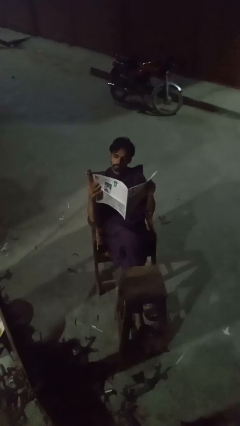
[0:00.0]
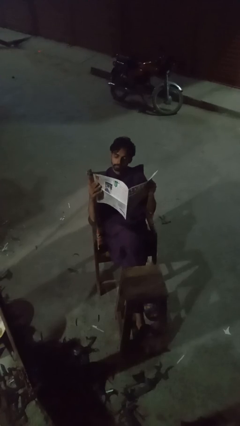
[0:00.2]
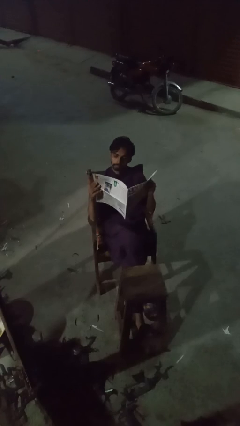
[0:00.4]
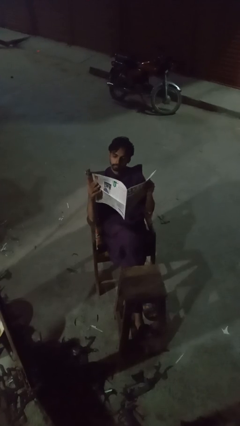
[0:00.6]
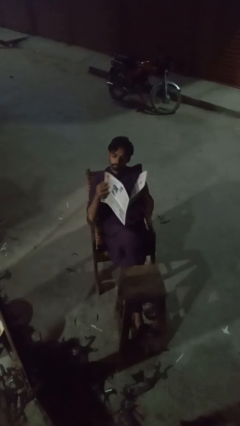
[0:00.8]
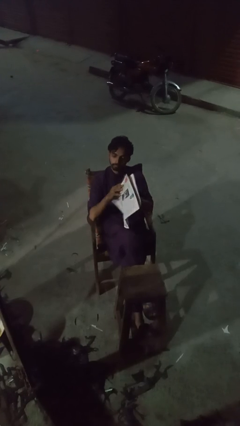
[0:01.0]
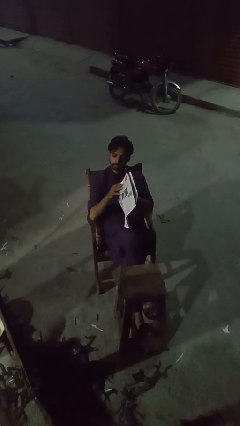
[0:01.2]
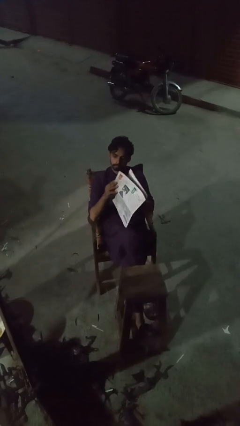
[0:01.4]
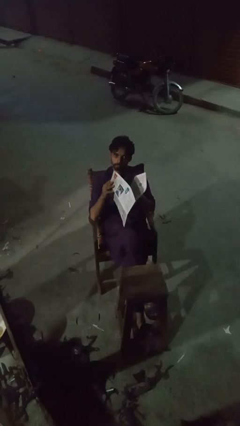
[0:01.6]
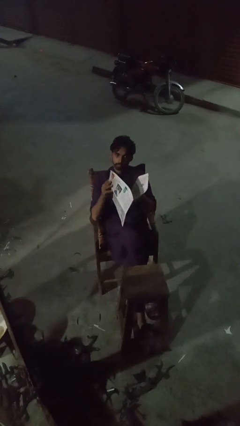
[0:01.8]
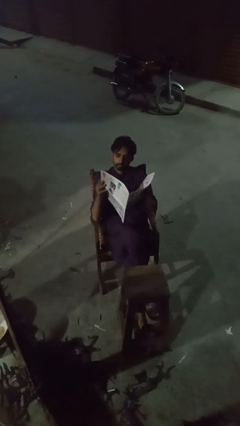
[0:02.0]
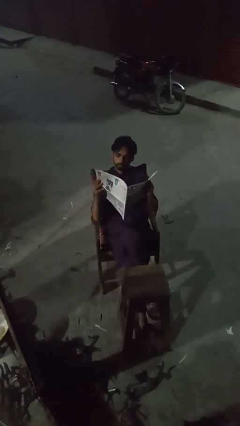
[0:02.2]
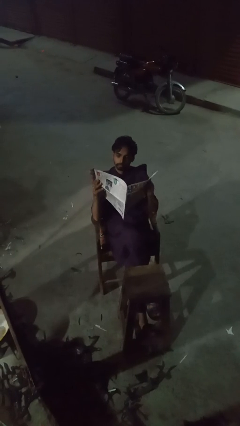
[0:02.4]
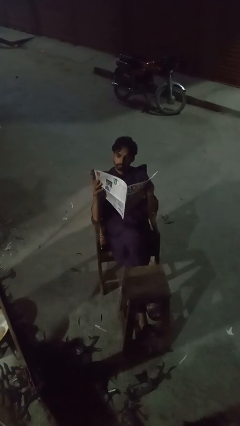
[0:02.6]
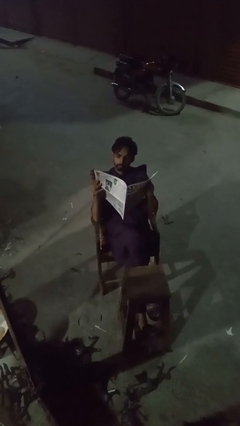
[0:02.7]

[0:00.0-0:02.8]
person reads newspaper

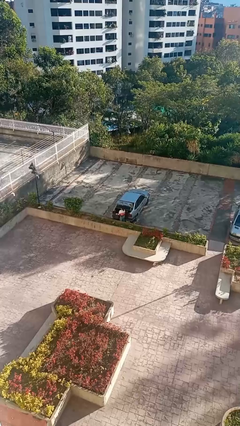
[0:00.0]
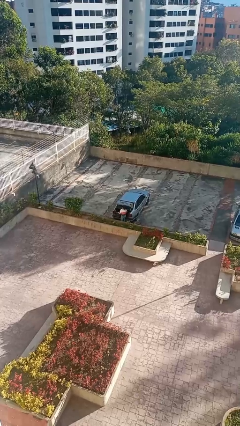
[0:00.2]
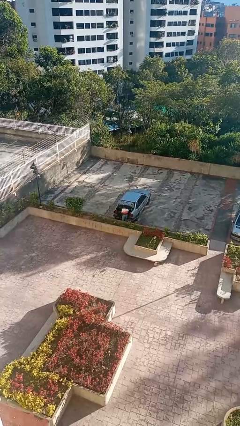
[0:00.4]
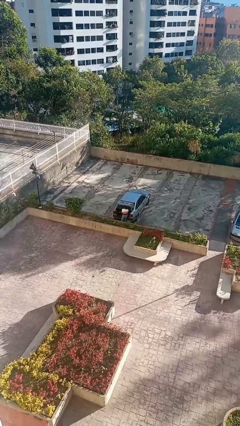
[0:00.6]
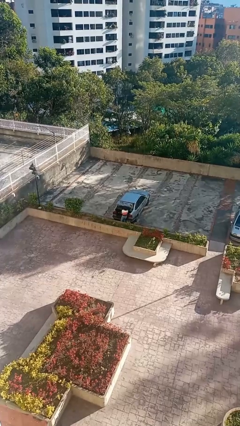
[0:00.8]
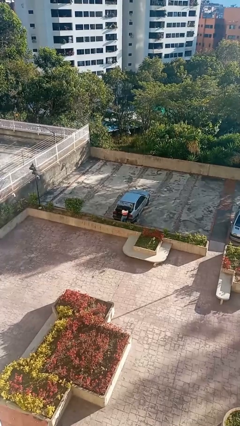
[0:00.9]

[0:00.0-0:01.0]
person loads car

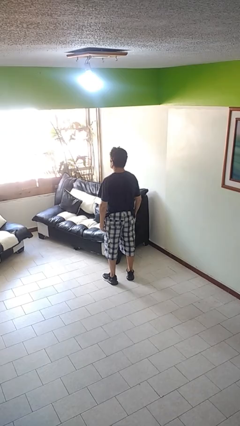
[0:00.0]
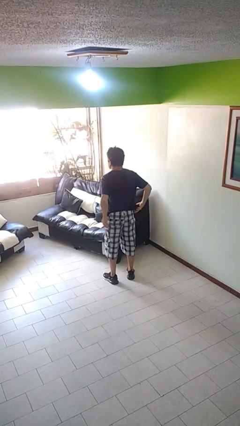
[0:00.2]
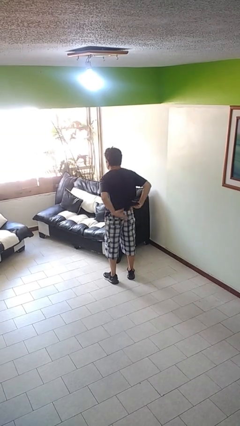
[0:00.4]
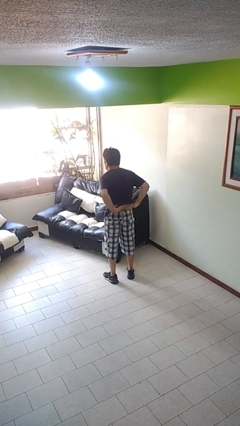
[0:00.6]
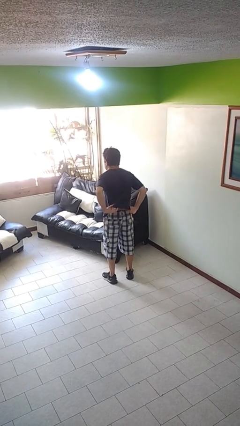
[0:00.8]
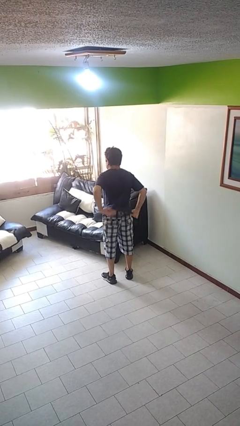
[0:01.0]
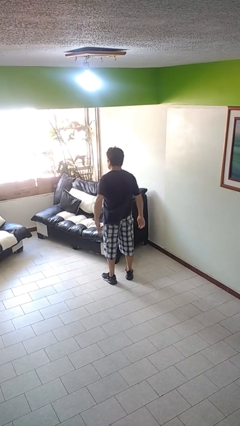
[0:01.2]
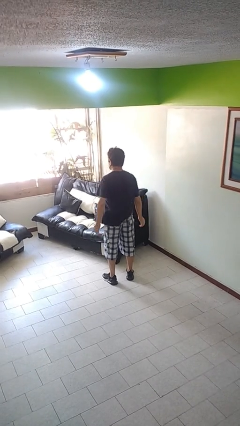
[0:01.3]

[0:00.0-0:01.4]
person untucks shirt

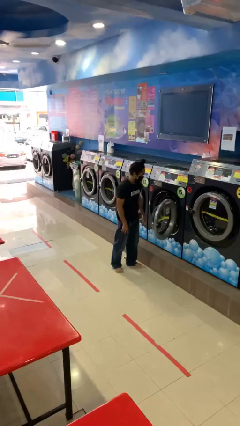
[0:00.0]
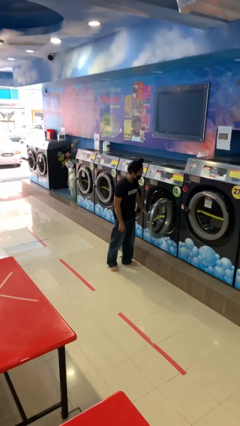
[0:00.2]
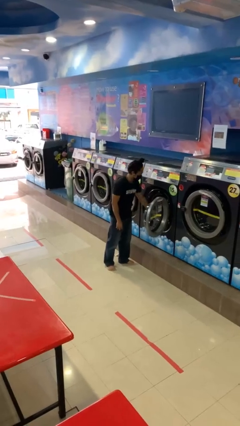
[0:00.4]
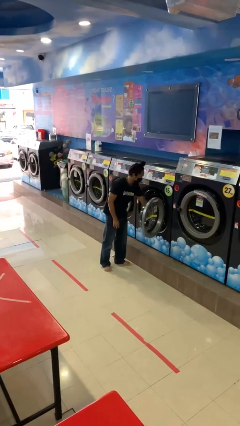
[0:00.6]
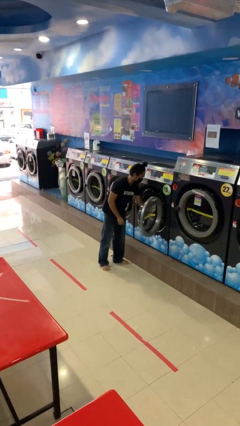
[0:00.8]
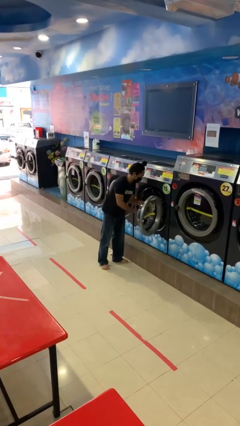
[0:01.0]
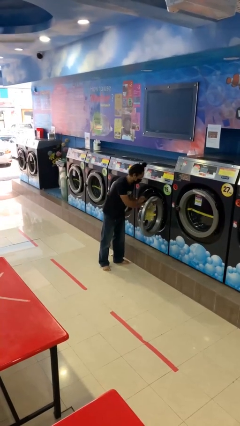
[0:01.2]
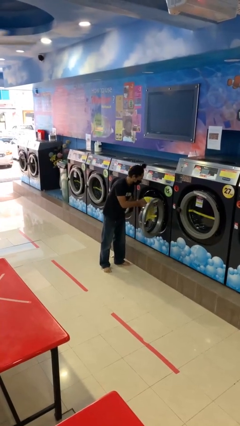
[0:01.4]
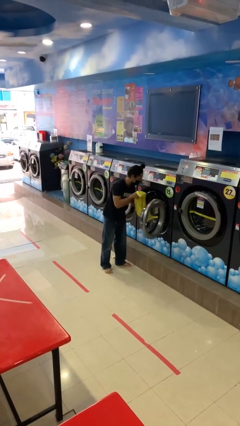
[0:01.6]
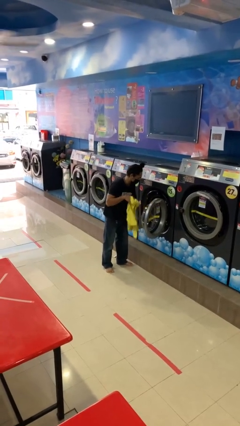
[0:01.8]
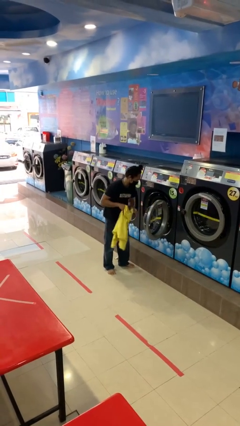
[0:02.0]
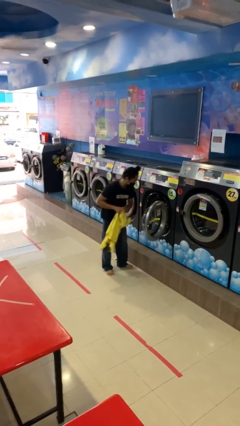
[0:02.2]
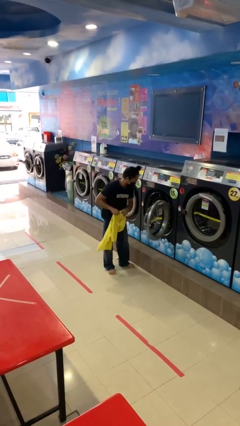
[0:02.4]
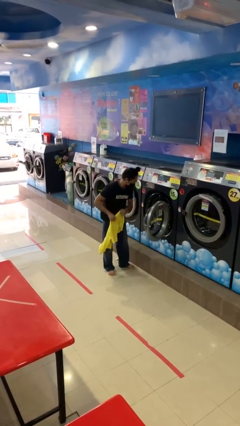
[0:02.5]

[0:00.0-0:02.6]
person unloads clotheswasher

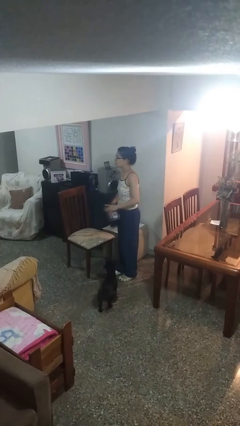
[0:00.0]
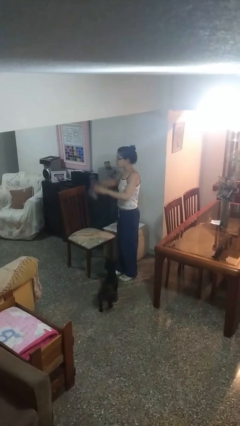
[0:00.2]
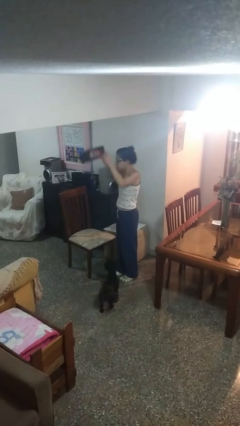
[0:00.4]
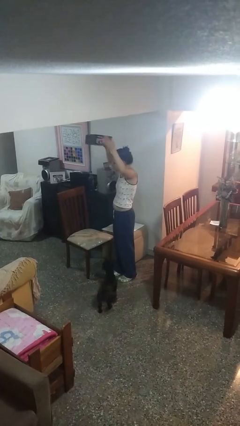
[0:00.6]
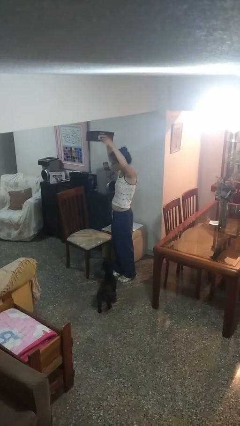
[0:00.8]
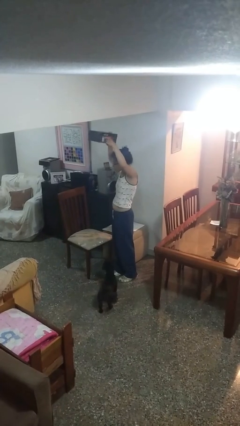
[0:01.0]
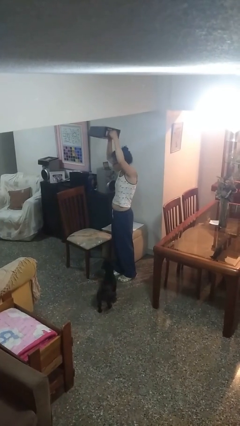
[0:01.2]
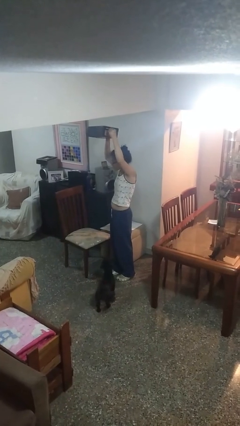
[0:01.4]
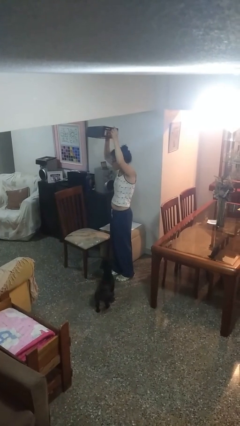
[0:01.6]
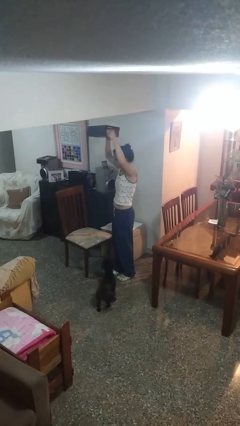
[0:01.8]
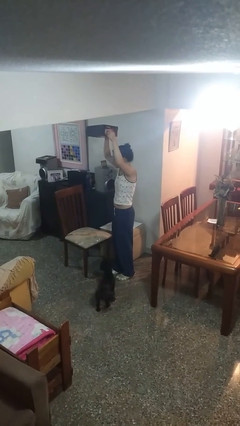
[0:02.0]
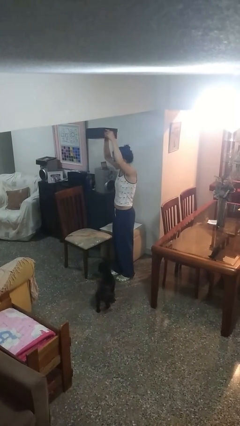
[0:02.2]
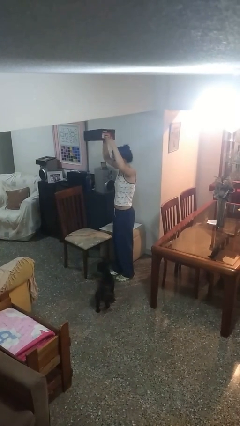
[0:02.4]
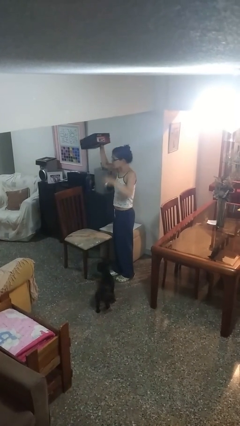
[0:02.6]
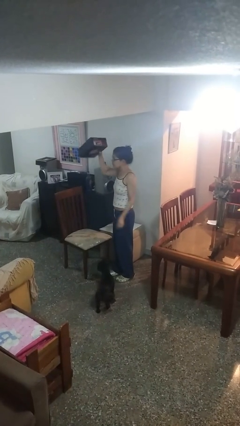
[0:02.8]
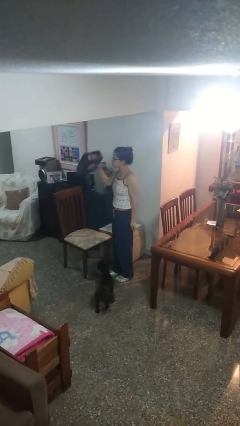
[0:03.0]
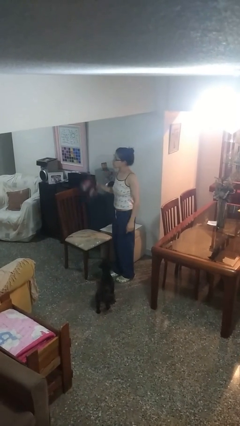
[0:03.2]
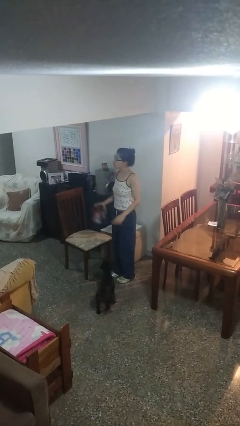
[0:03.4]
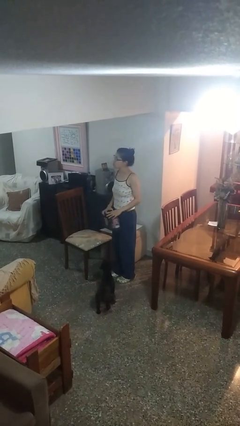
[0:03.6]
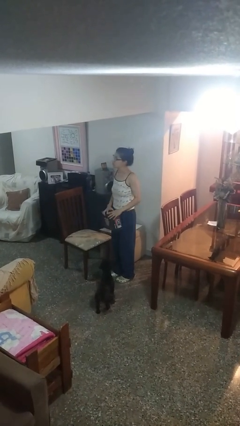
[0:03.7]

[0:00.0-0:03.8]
person holds object above head

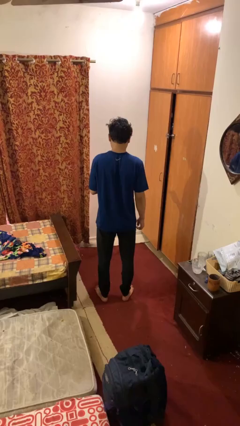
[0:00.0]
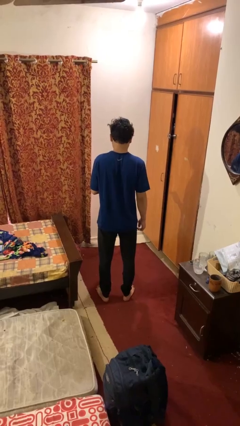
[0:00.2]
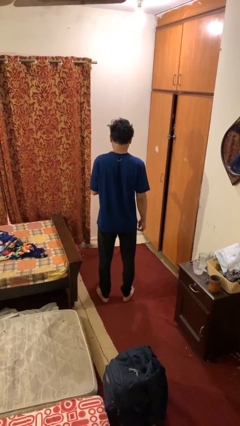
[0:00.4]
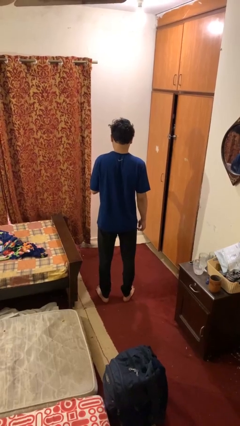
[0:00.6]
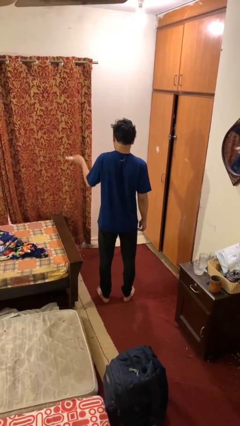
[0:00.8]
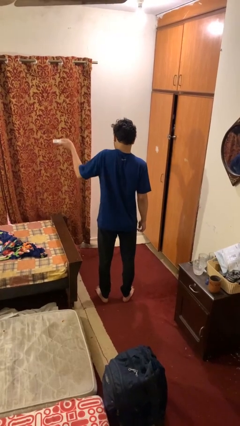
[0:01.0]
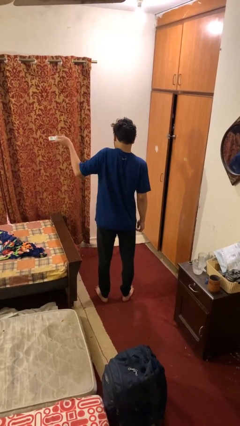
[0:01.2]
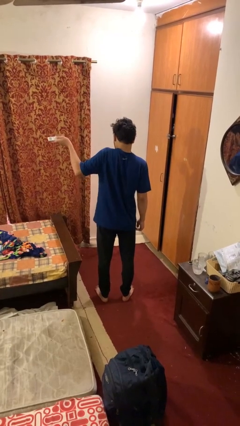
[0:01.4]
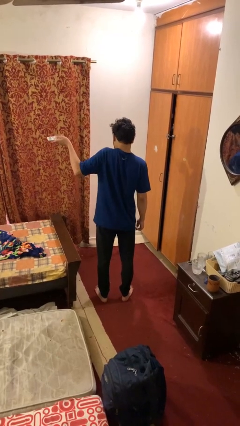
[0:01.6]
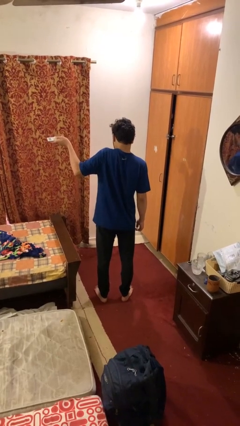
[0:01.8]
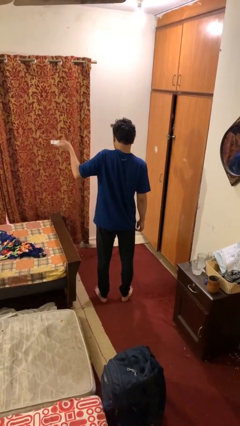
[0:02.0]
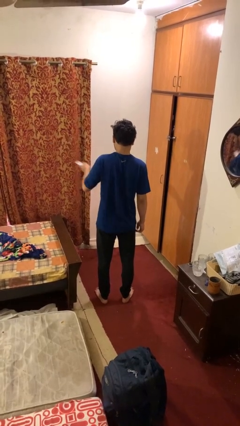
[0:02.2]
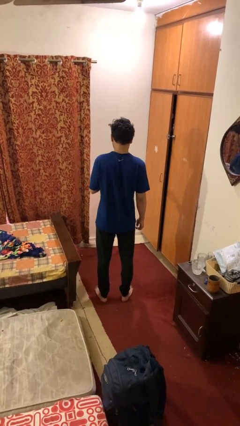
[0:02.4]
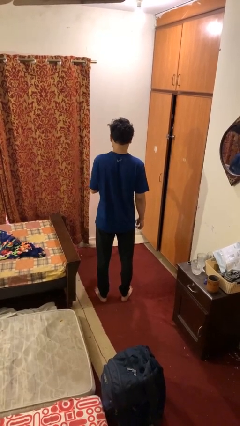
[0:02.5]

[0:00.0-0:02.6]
person uses television remote

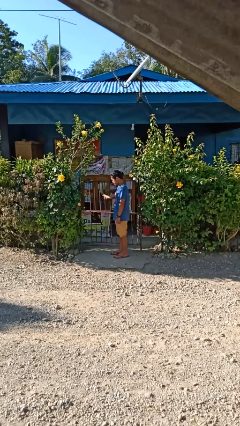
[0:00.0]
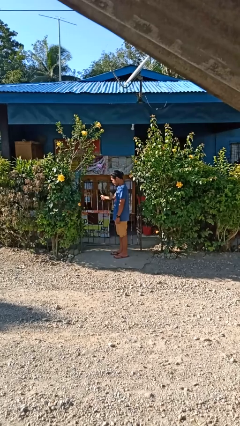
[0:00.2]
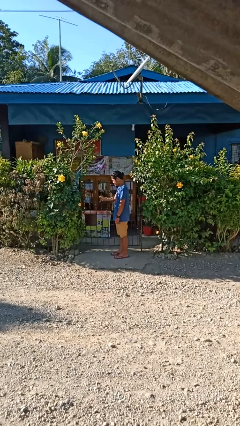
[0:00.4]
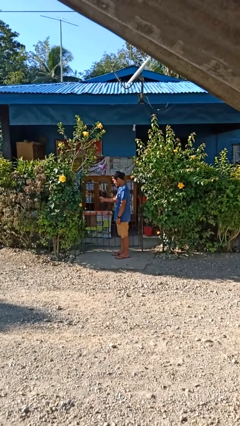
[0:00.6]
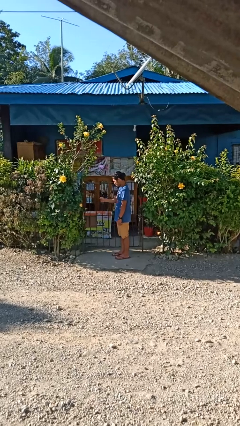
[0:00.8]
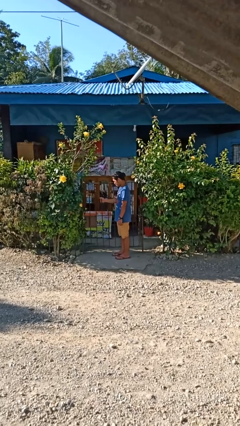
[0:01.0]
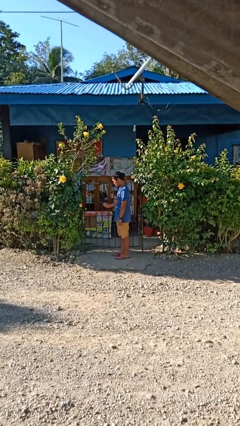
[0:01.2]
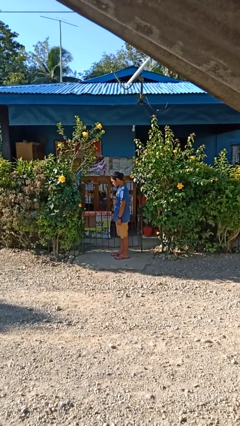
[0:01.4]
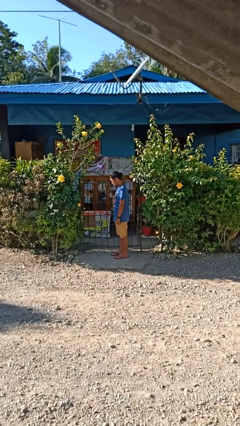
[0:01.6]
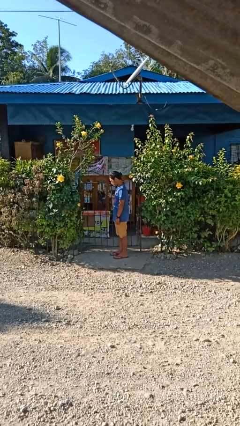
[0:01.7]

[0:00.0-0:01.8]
person closes gate

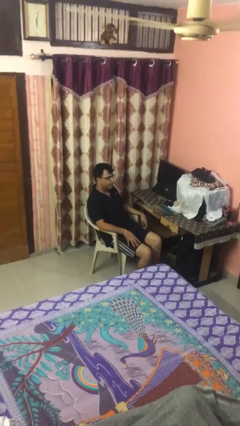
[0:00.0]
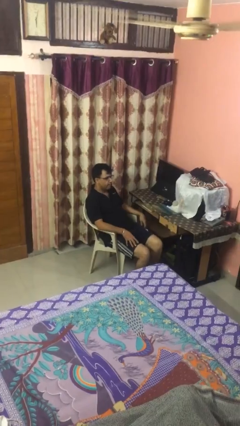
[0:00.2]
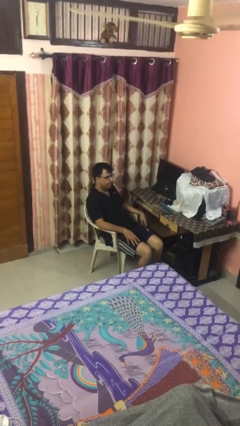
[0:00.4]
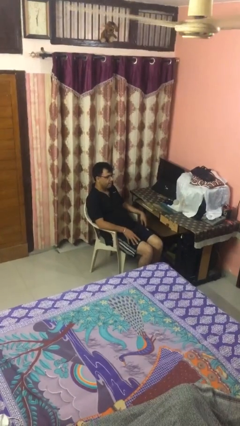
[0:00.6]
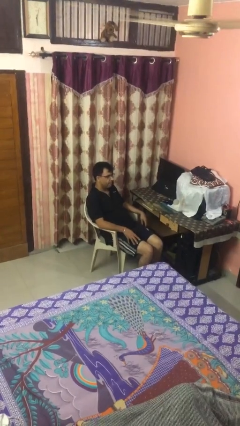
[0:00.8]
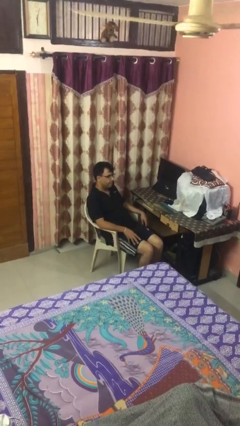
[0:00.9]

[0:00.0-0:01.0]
person puts feet up
